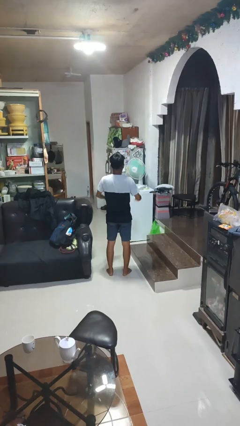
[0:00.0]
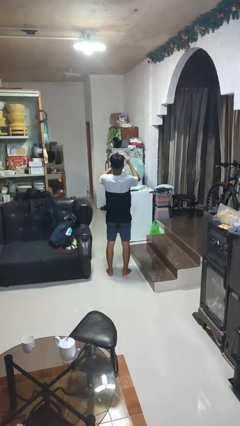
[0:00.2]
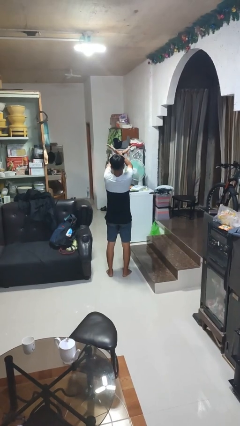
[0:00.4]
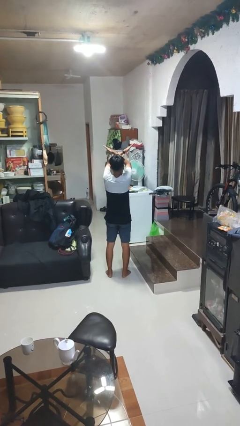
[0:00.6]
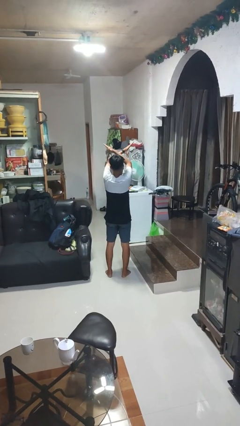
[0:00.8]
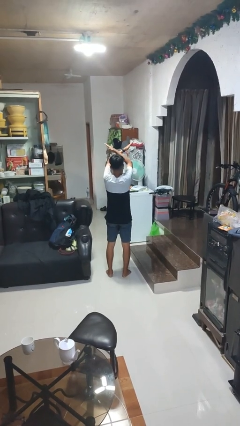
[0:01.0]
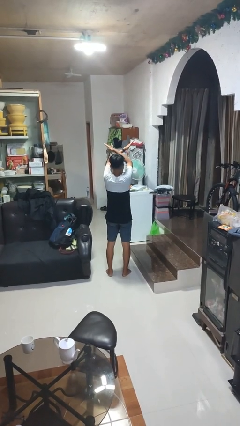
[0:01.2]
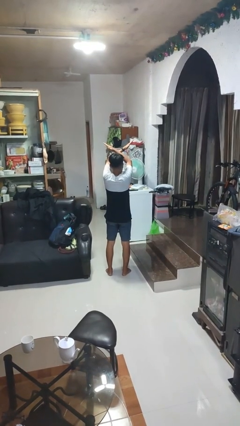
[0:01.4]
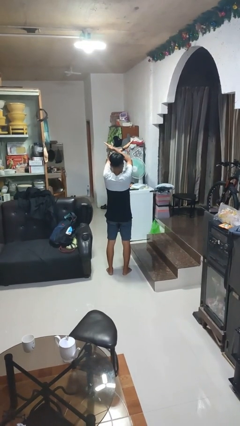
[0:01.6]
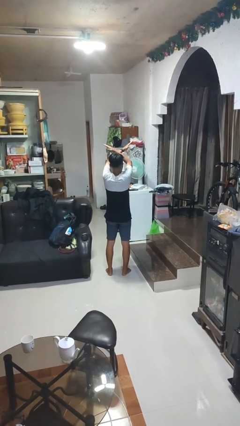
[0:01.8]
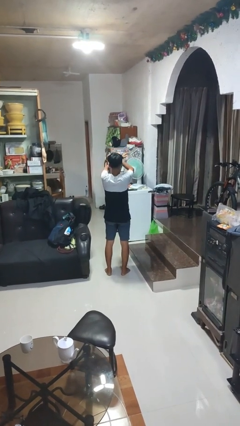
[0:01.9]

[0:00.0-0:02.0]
person gestures arms x

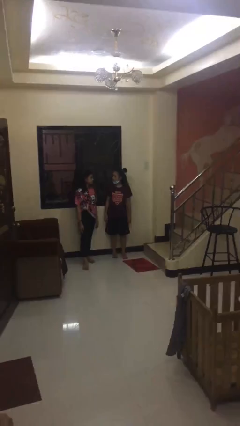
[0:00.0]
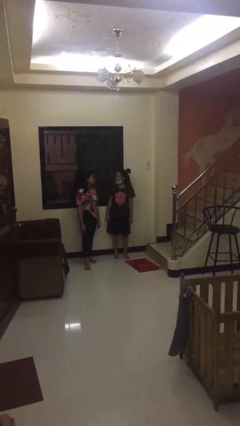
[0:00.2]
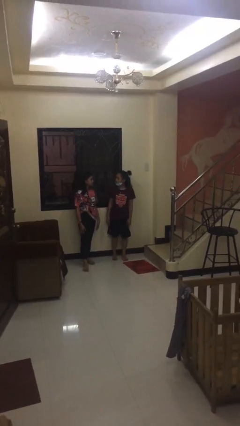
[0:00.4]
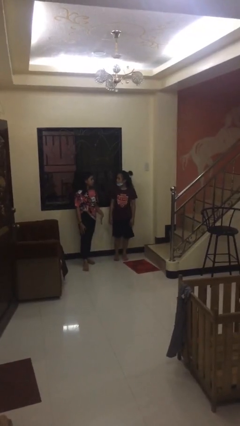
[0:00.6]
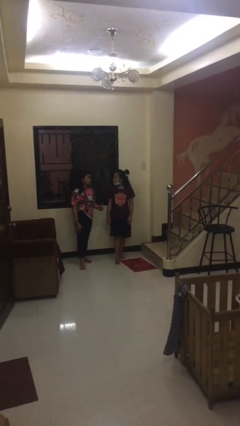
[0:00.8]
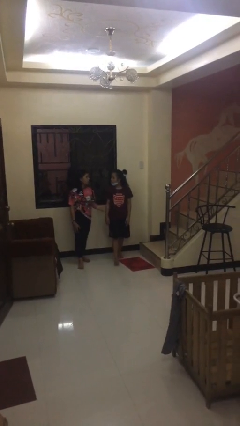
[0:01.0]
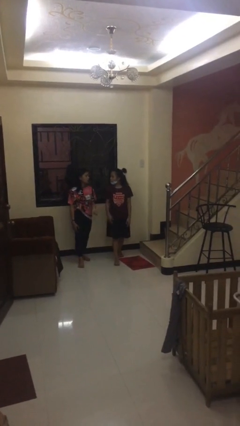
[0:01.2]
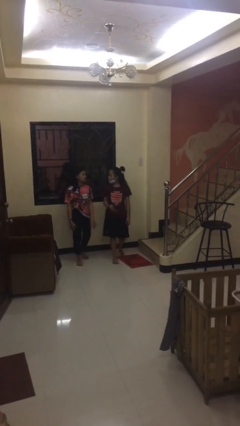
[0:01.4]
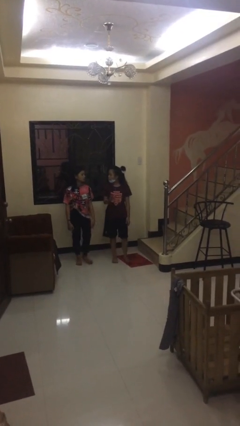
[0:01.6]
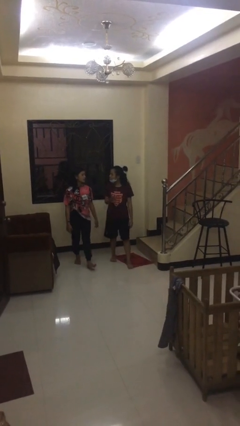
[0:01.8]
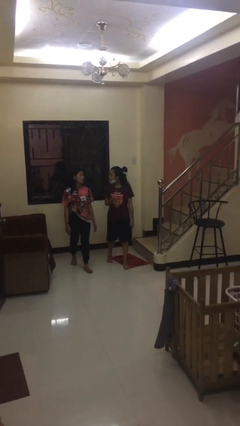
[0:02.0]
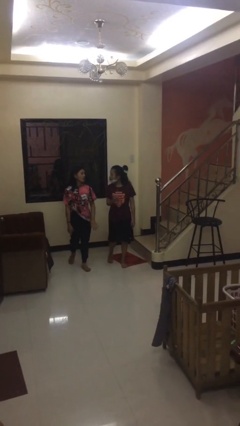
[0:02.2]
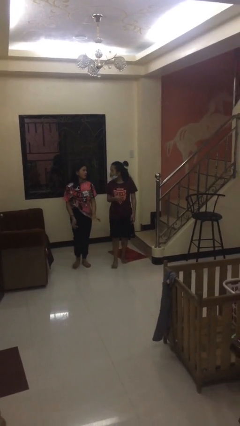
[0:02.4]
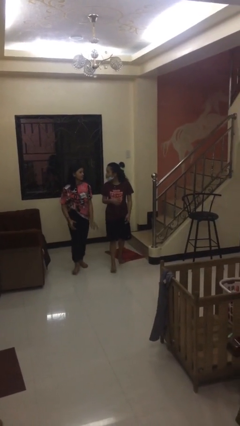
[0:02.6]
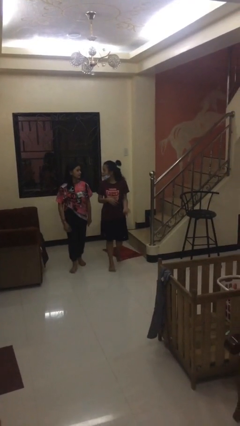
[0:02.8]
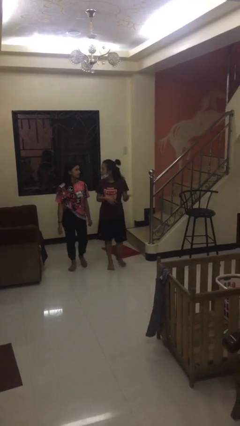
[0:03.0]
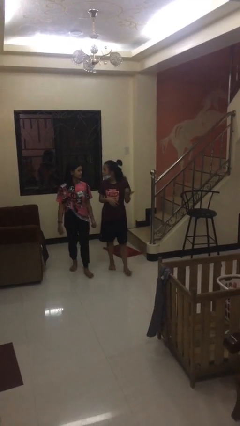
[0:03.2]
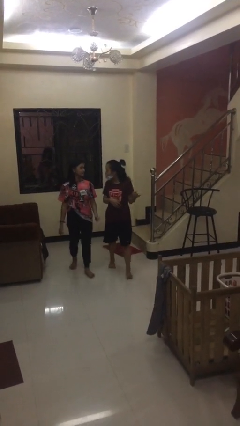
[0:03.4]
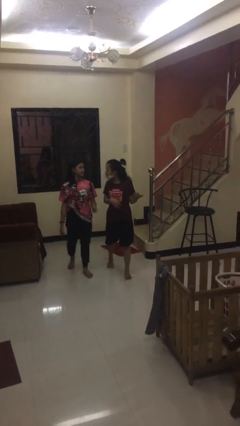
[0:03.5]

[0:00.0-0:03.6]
person talks to person

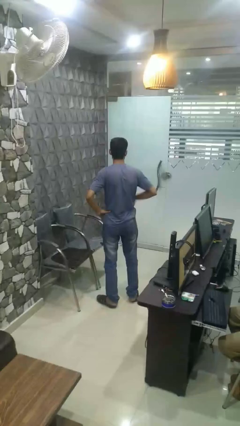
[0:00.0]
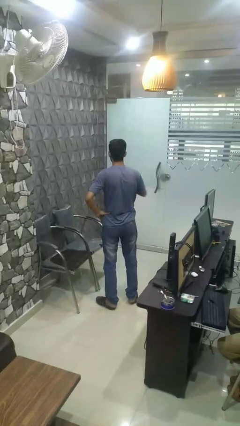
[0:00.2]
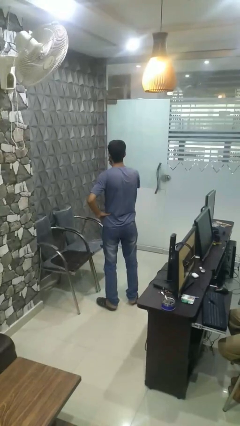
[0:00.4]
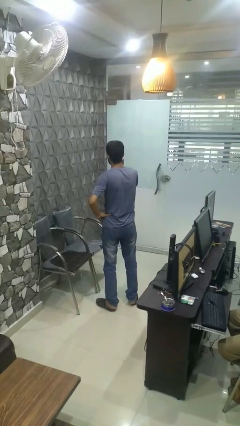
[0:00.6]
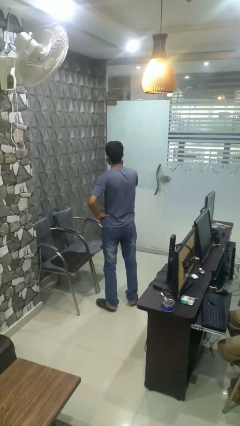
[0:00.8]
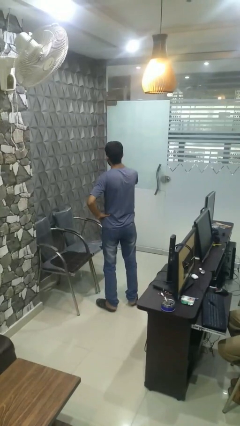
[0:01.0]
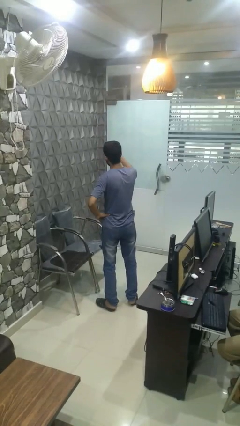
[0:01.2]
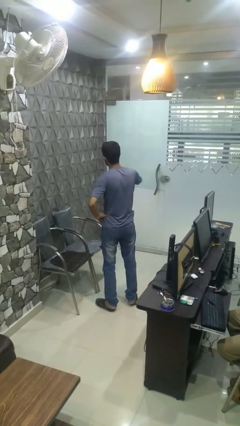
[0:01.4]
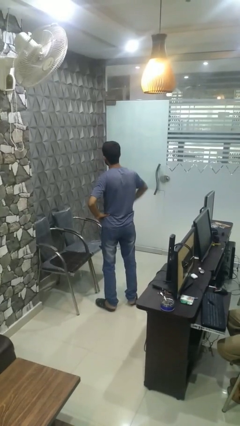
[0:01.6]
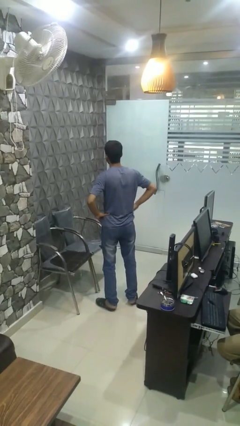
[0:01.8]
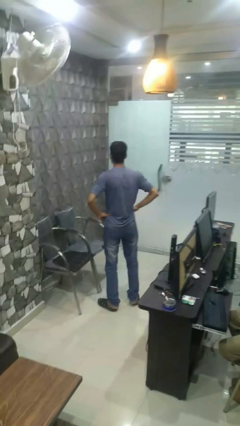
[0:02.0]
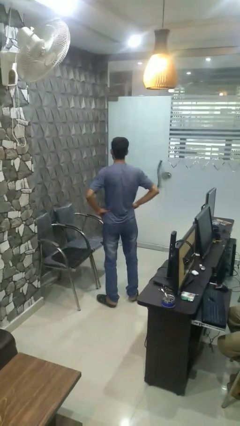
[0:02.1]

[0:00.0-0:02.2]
person gestures blow kiss

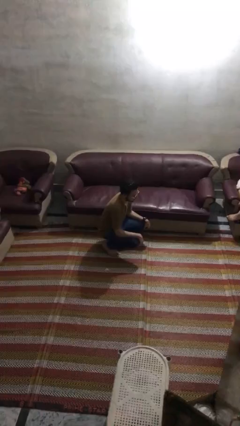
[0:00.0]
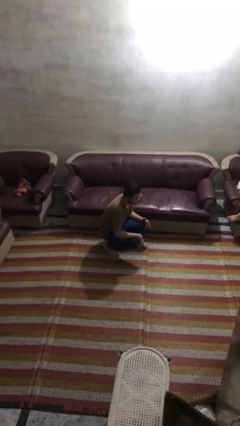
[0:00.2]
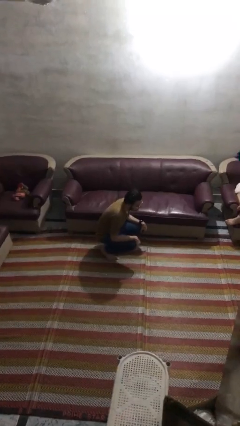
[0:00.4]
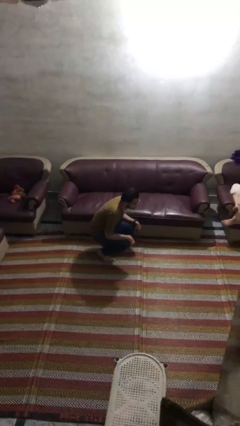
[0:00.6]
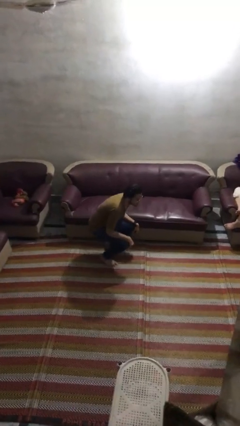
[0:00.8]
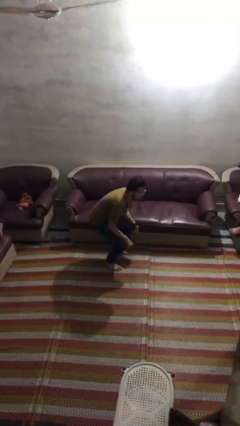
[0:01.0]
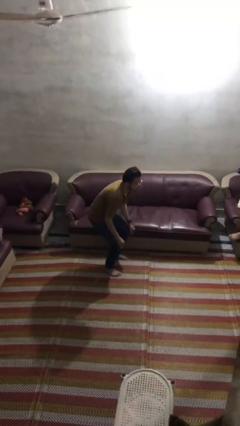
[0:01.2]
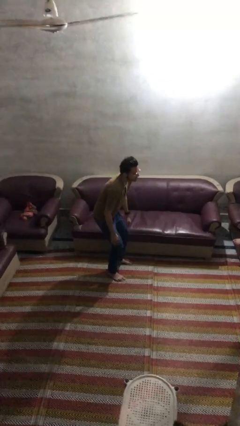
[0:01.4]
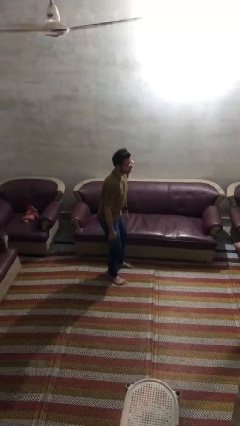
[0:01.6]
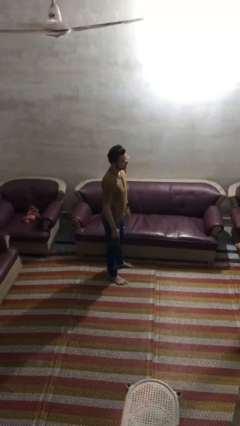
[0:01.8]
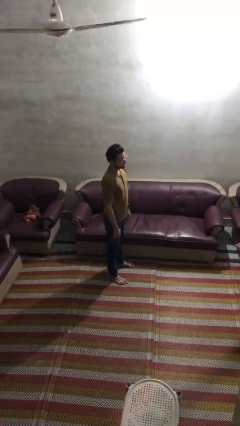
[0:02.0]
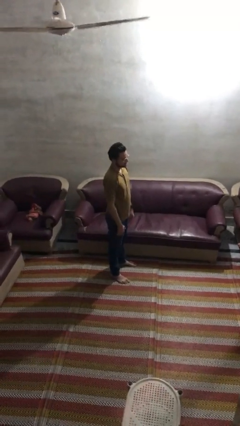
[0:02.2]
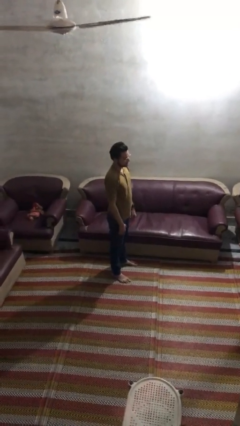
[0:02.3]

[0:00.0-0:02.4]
person stands up

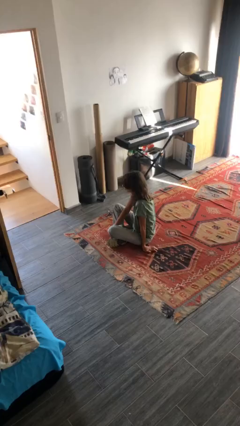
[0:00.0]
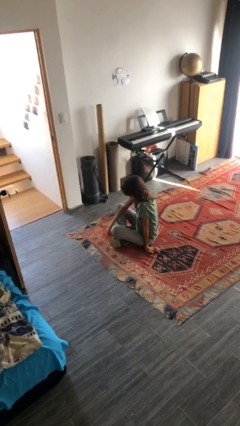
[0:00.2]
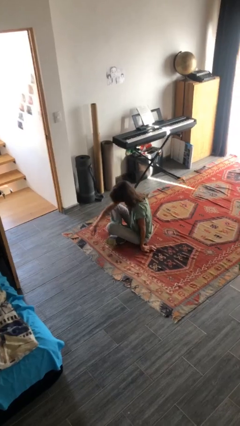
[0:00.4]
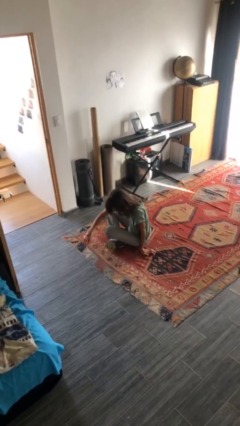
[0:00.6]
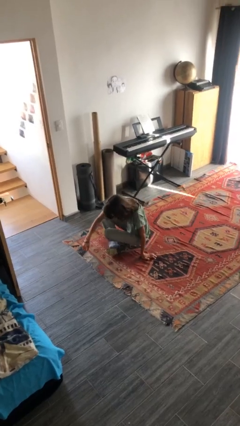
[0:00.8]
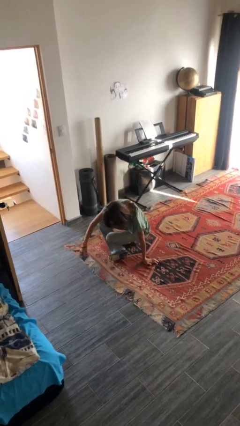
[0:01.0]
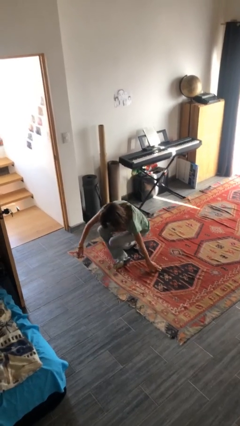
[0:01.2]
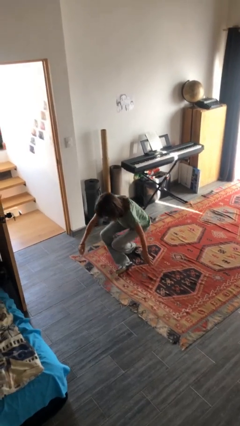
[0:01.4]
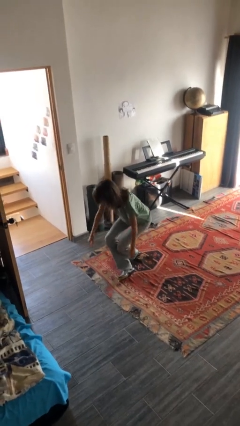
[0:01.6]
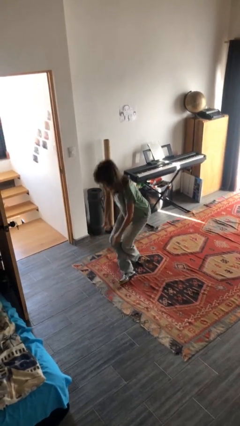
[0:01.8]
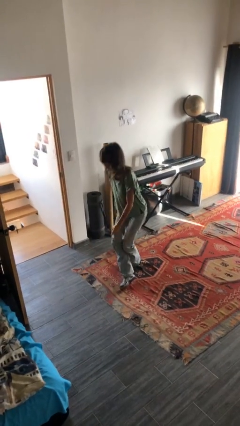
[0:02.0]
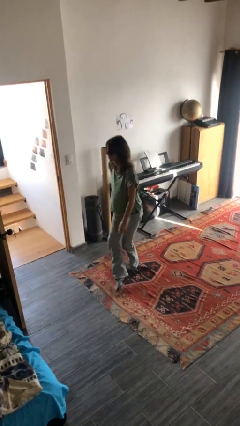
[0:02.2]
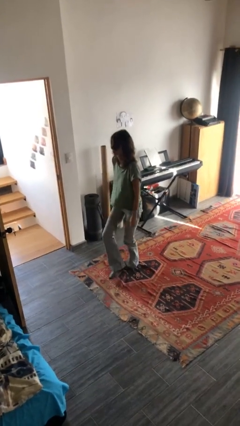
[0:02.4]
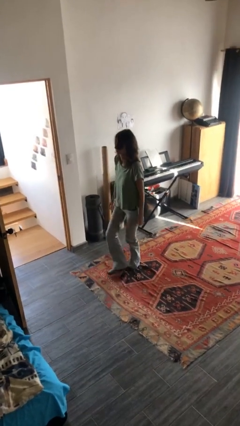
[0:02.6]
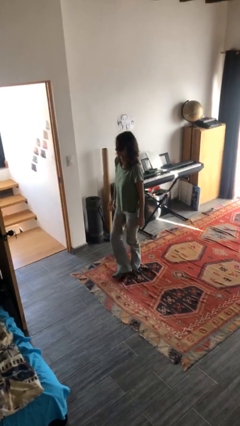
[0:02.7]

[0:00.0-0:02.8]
person stands up from floor

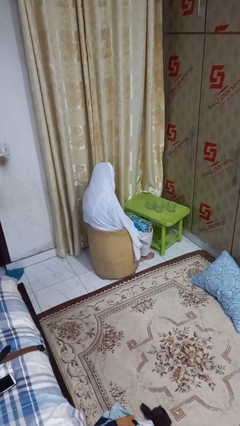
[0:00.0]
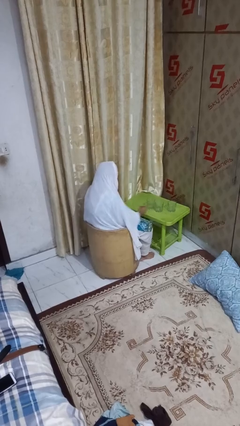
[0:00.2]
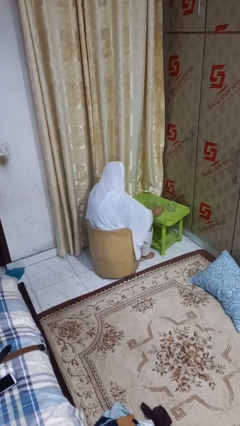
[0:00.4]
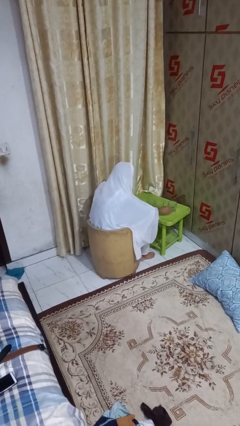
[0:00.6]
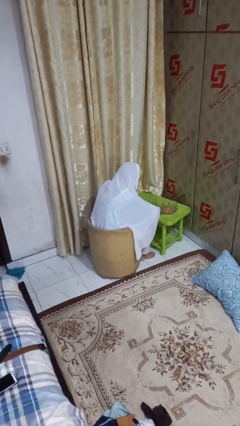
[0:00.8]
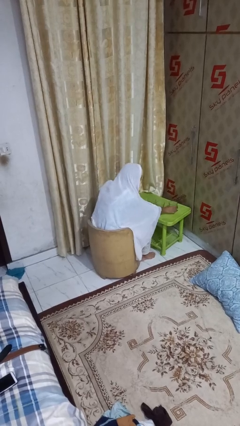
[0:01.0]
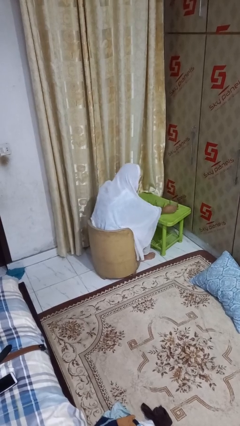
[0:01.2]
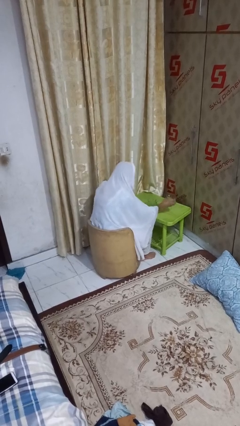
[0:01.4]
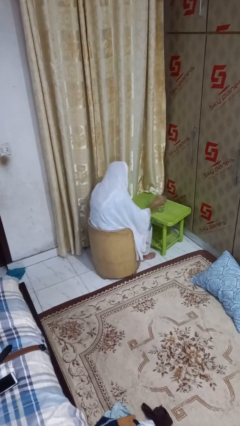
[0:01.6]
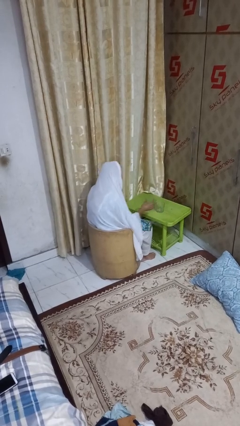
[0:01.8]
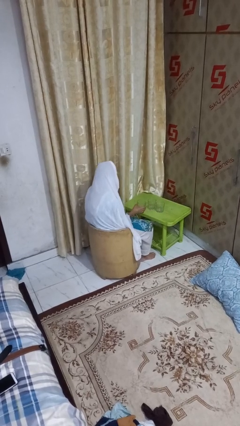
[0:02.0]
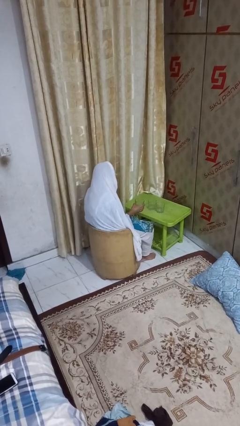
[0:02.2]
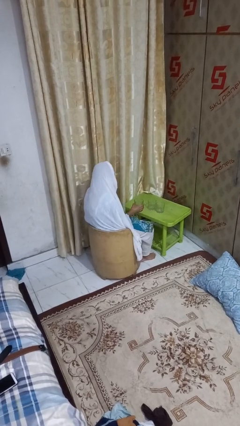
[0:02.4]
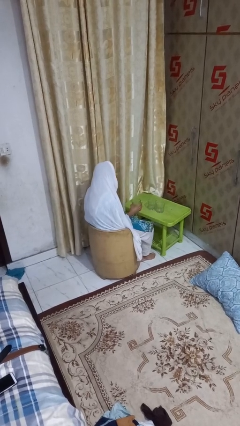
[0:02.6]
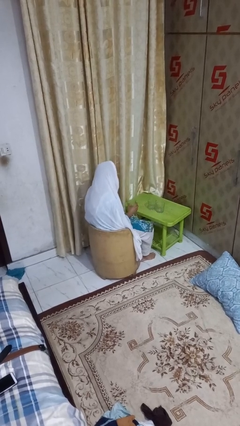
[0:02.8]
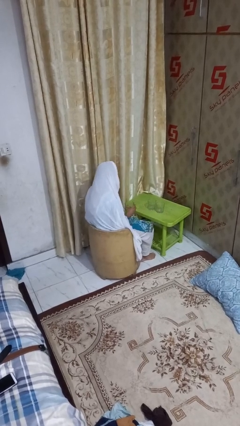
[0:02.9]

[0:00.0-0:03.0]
person picks up object from table

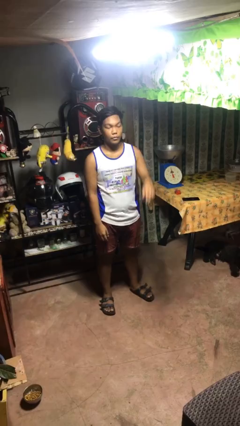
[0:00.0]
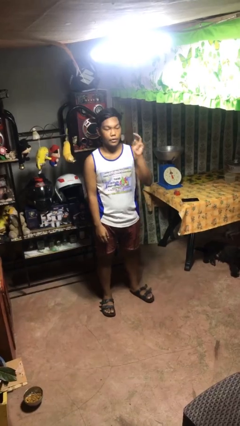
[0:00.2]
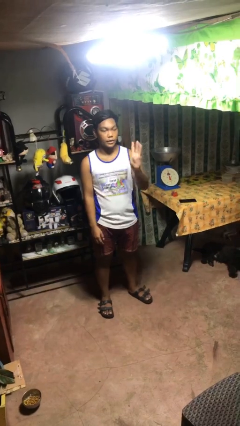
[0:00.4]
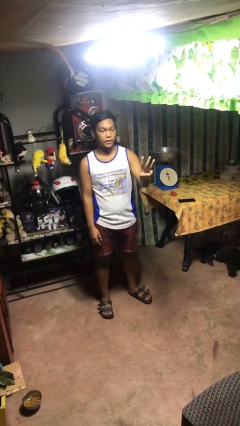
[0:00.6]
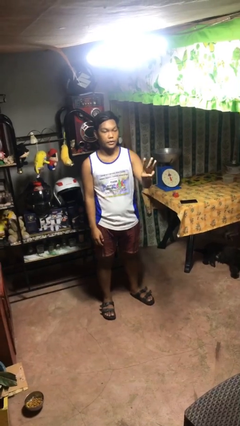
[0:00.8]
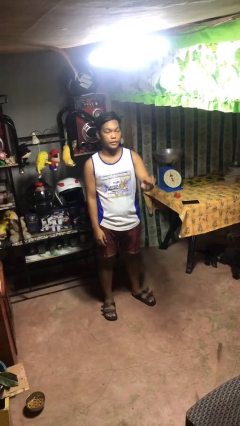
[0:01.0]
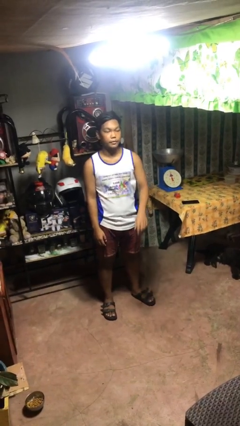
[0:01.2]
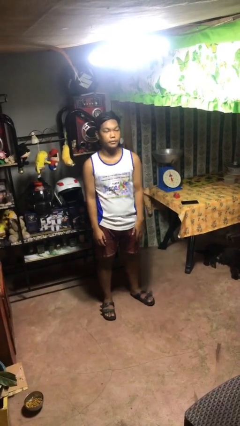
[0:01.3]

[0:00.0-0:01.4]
person gestures number three
